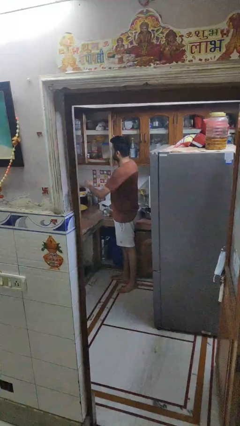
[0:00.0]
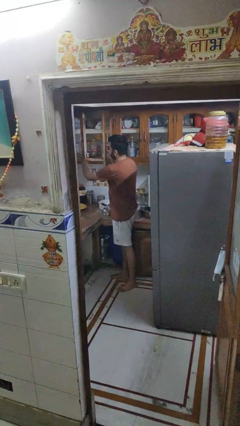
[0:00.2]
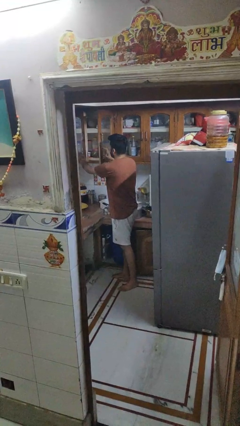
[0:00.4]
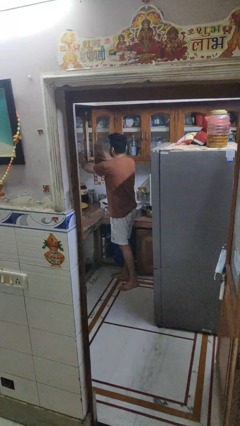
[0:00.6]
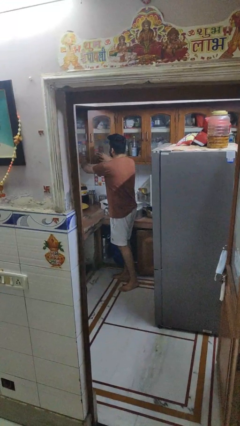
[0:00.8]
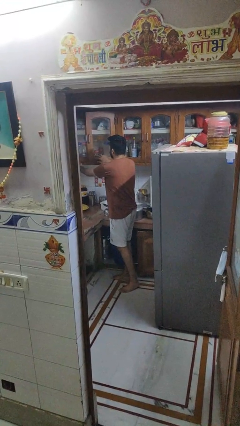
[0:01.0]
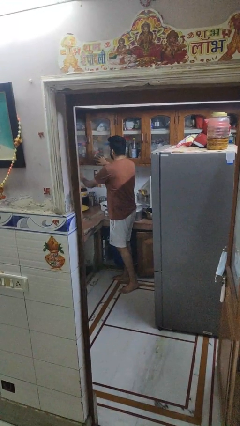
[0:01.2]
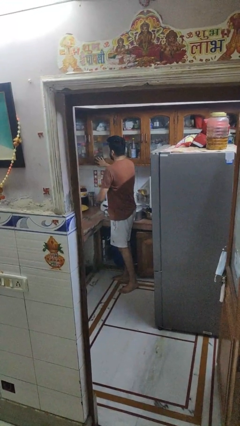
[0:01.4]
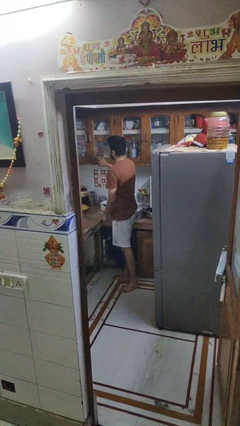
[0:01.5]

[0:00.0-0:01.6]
person closes cabinet

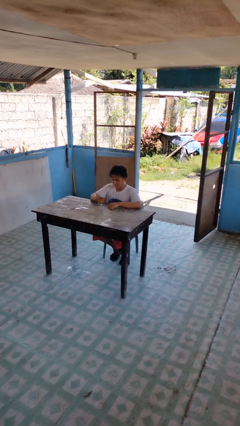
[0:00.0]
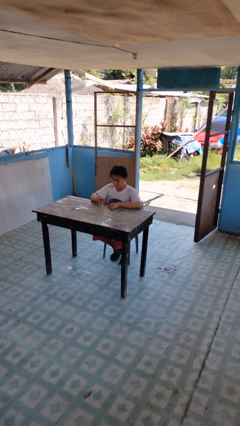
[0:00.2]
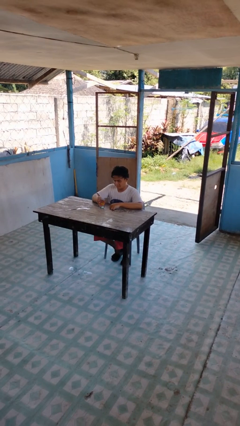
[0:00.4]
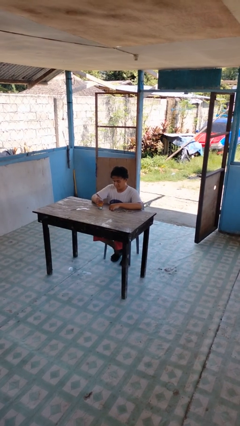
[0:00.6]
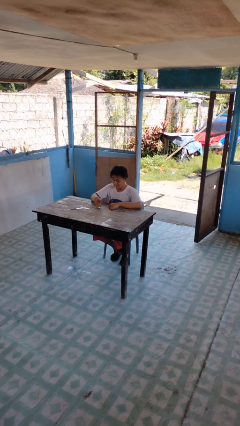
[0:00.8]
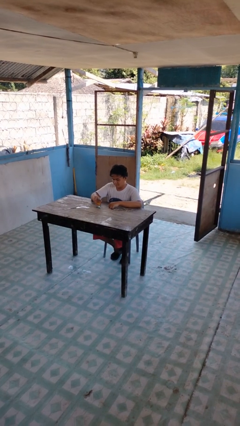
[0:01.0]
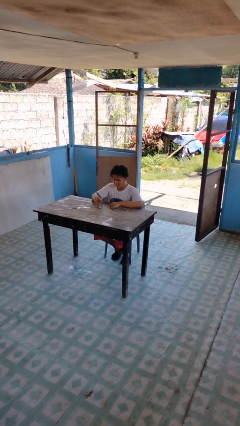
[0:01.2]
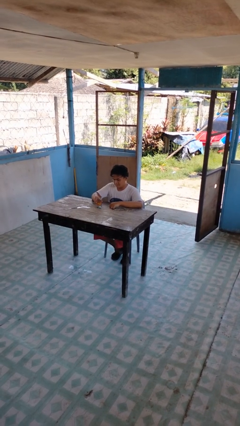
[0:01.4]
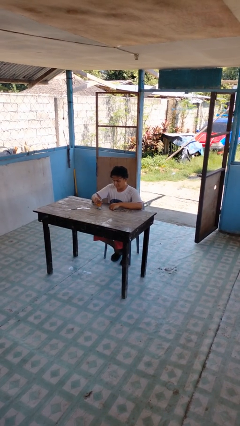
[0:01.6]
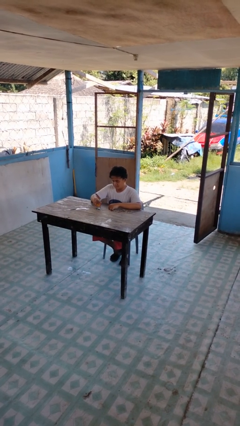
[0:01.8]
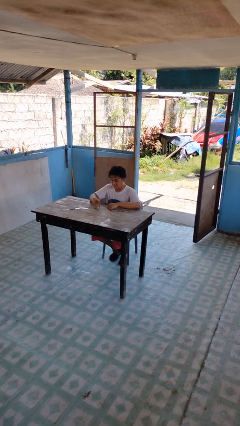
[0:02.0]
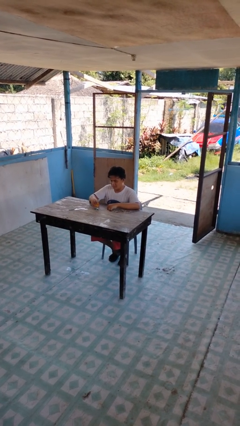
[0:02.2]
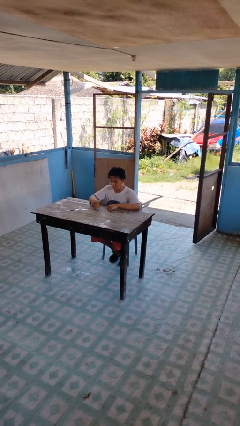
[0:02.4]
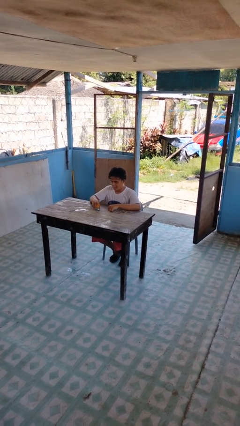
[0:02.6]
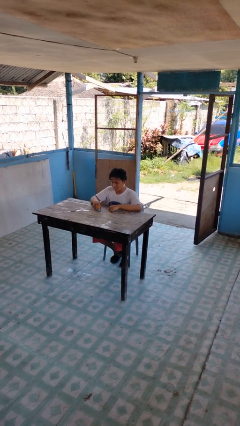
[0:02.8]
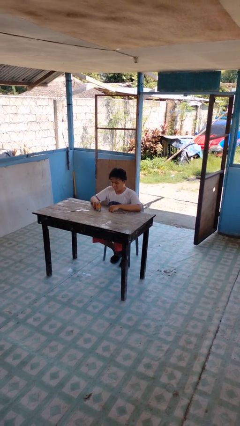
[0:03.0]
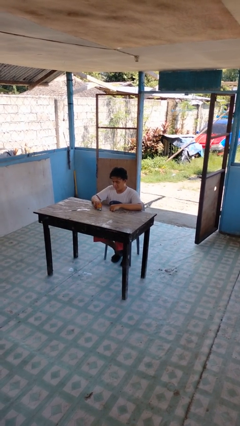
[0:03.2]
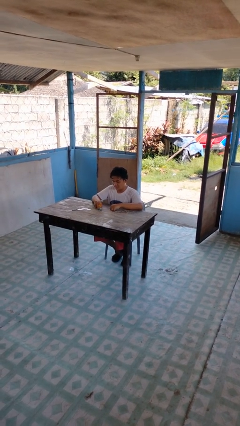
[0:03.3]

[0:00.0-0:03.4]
person sets upright glass

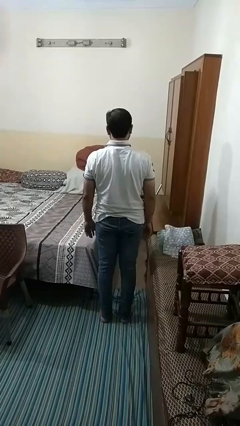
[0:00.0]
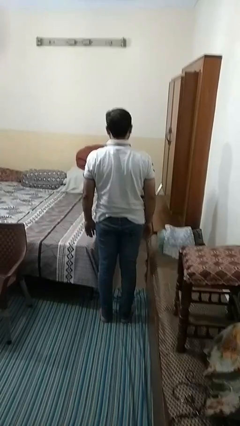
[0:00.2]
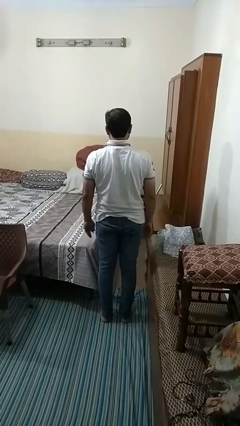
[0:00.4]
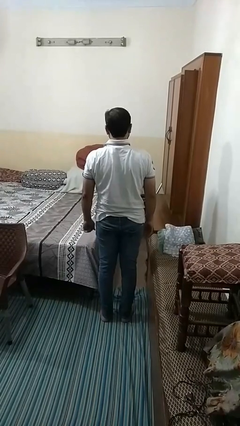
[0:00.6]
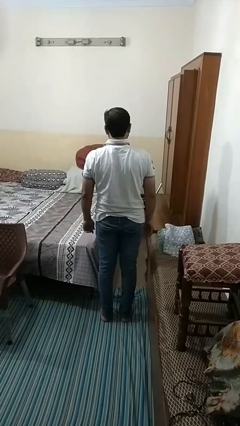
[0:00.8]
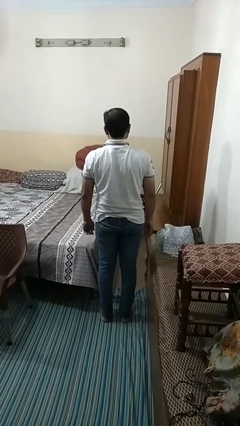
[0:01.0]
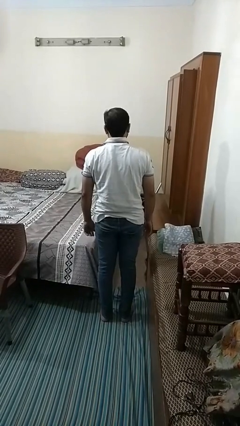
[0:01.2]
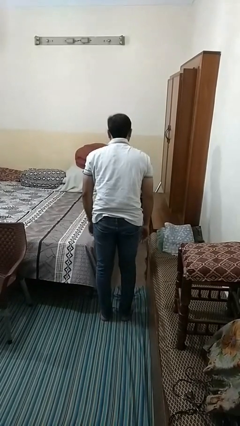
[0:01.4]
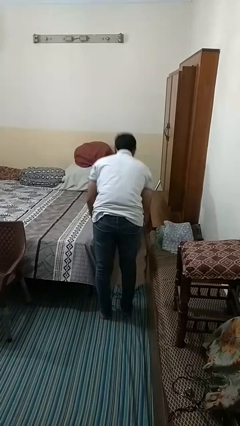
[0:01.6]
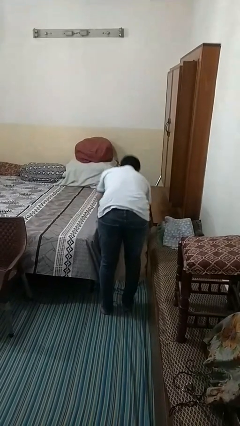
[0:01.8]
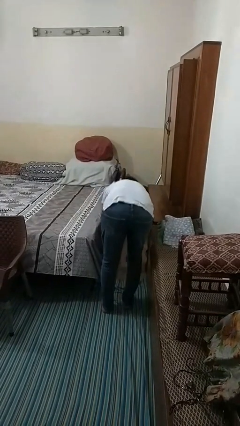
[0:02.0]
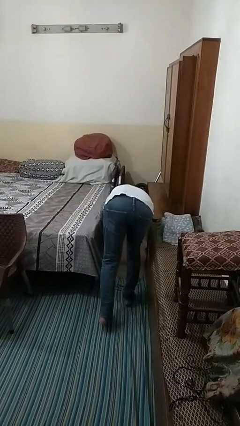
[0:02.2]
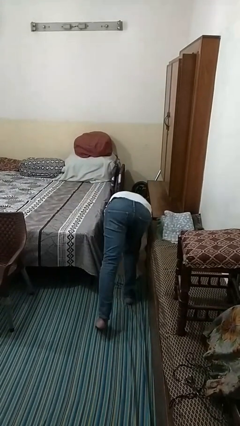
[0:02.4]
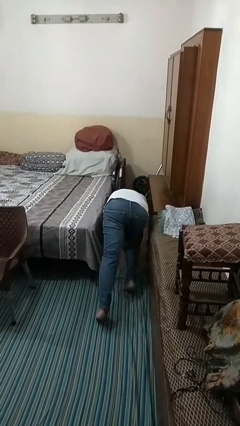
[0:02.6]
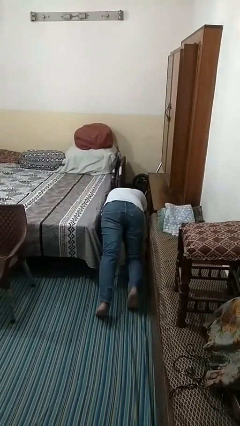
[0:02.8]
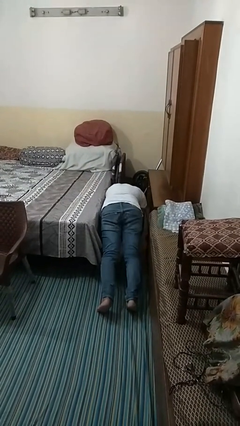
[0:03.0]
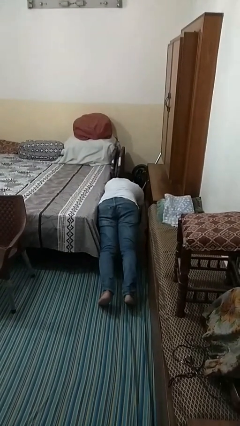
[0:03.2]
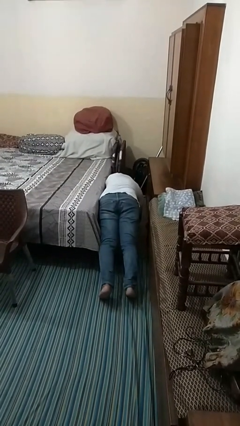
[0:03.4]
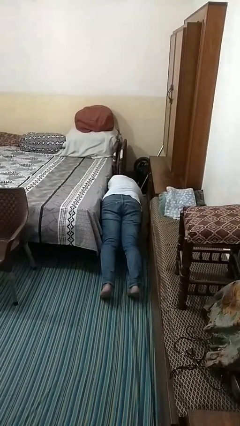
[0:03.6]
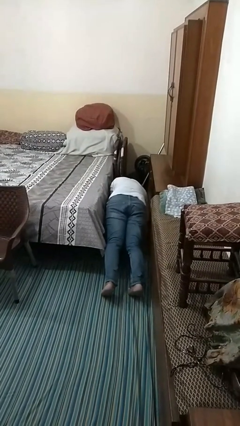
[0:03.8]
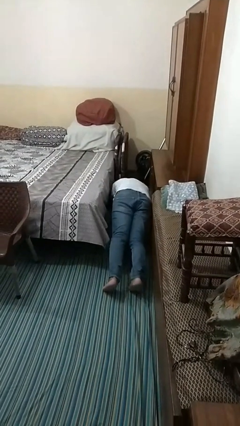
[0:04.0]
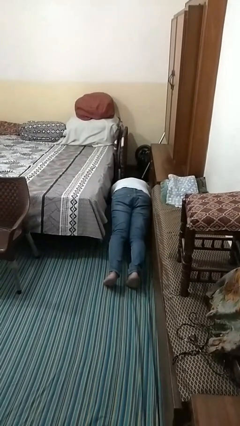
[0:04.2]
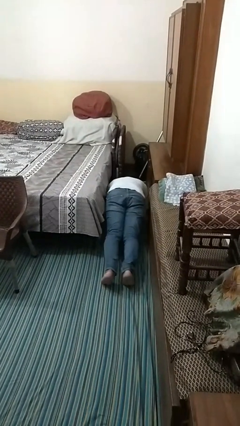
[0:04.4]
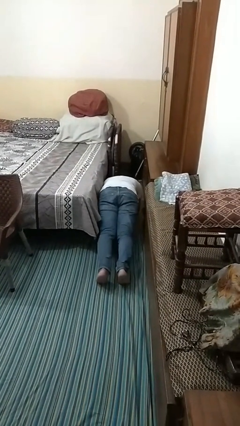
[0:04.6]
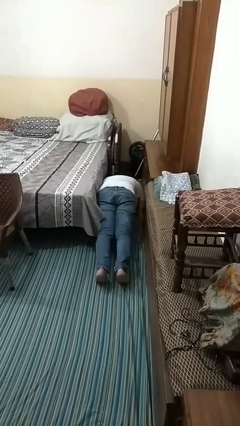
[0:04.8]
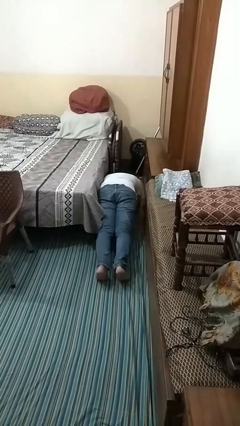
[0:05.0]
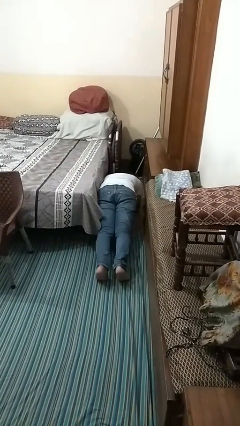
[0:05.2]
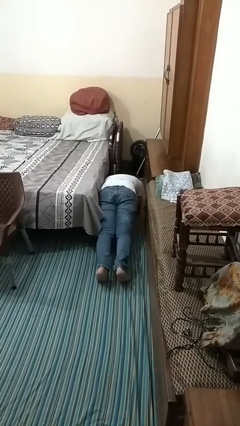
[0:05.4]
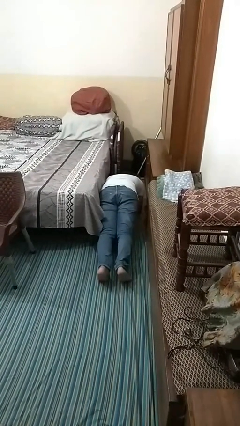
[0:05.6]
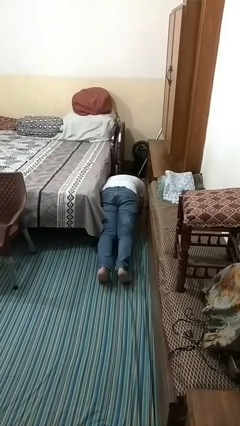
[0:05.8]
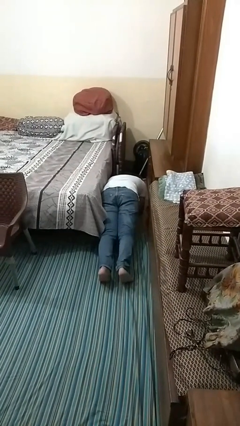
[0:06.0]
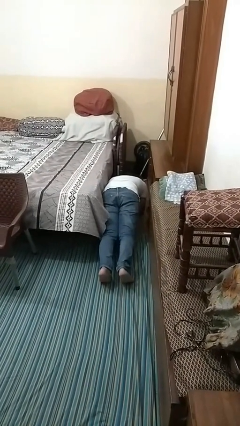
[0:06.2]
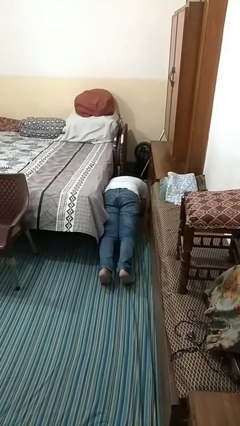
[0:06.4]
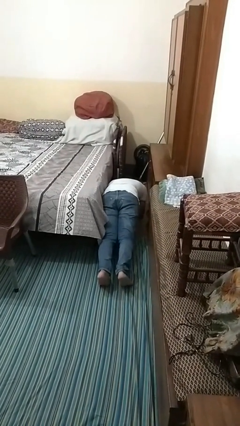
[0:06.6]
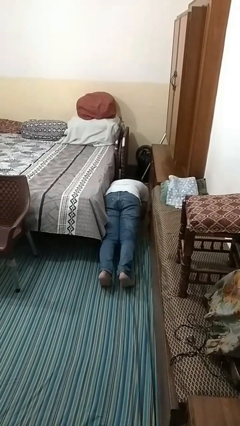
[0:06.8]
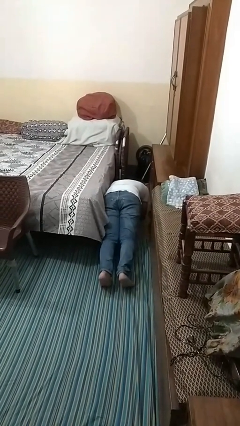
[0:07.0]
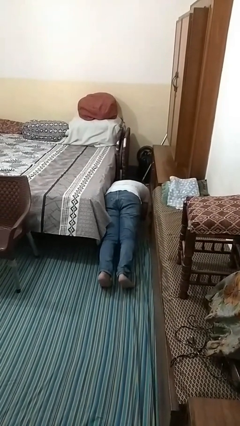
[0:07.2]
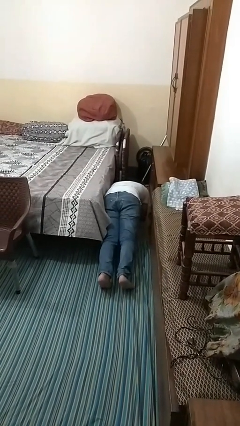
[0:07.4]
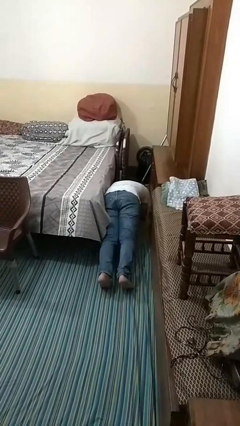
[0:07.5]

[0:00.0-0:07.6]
person exercises with plank

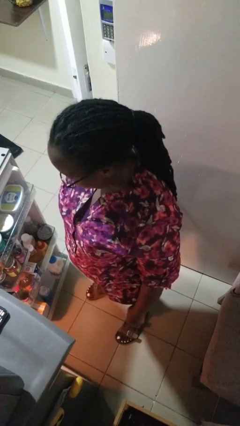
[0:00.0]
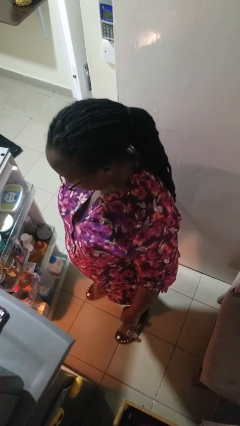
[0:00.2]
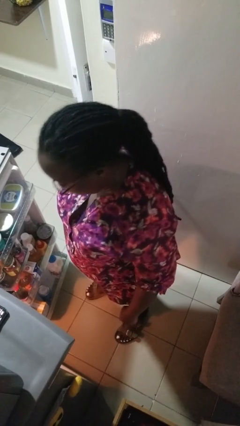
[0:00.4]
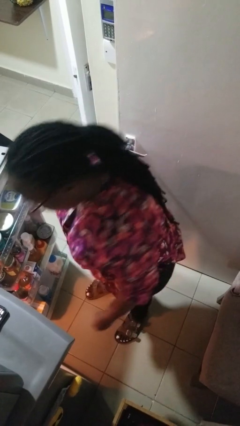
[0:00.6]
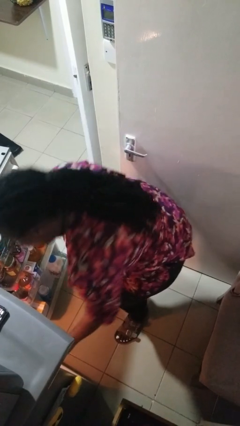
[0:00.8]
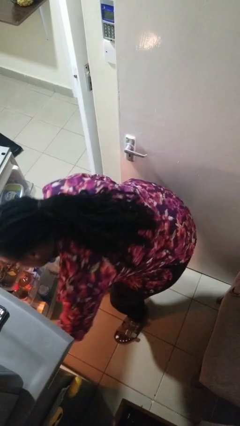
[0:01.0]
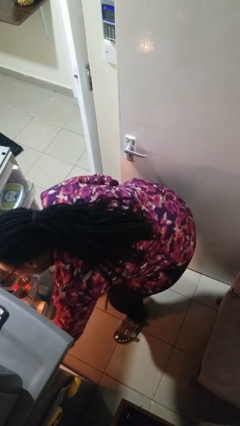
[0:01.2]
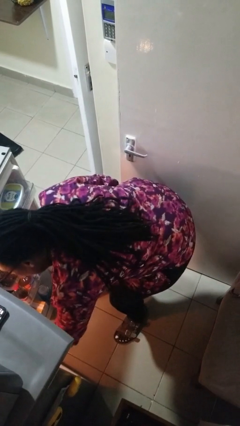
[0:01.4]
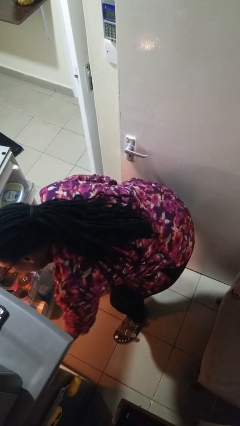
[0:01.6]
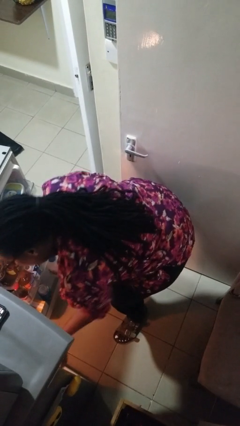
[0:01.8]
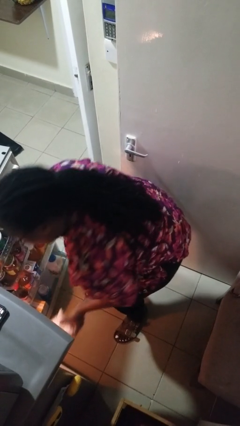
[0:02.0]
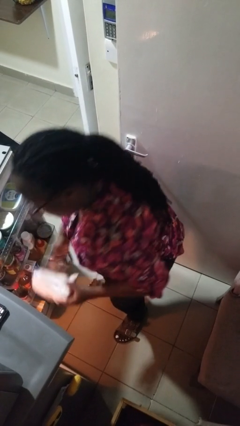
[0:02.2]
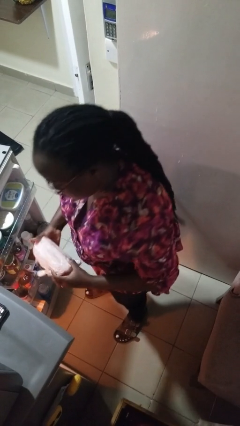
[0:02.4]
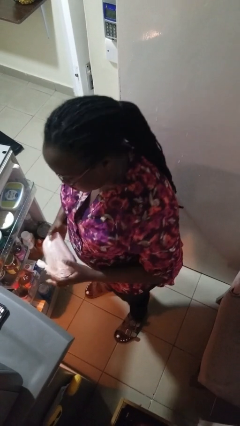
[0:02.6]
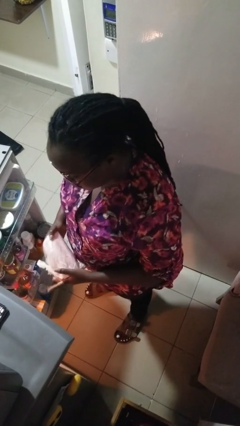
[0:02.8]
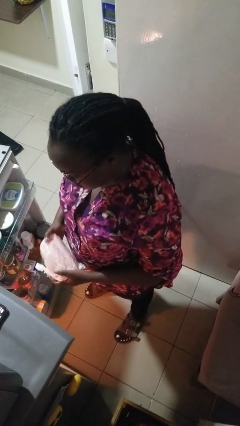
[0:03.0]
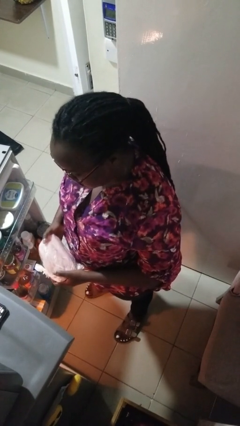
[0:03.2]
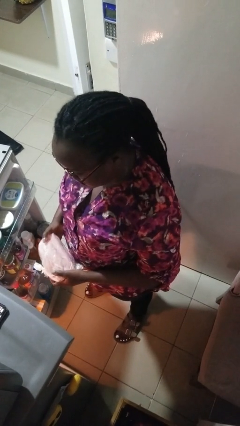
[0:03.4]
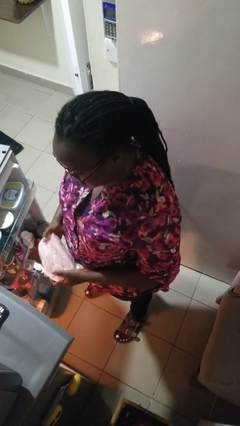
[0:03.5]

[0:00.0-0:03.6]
person takes object from refrigerator

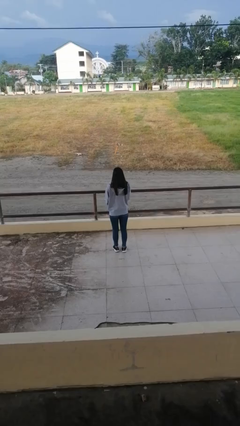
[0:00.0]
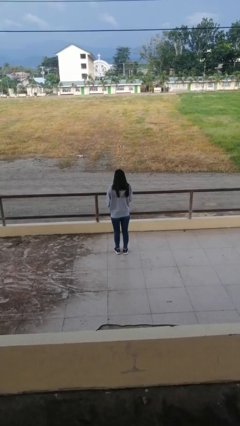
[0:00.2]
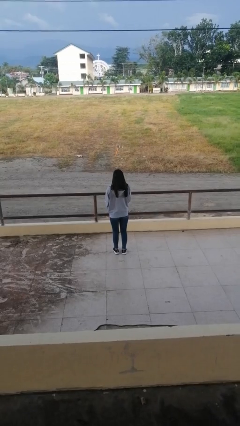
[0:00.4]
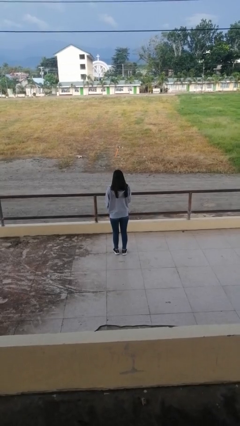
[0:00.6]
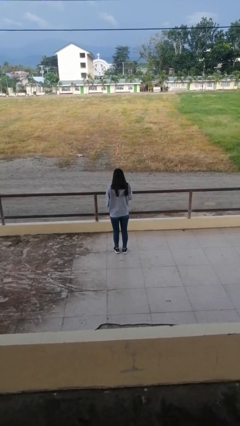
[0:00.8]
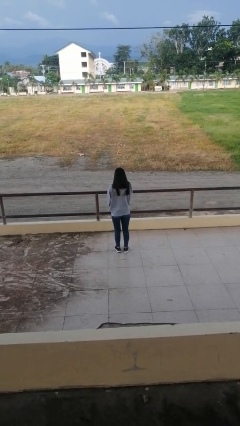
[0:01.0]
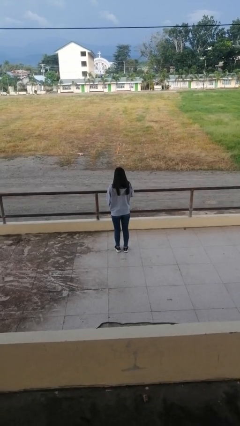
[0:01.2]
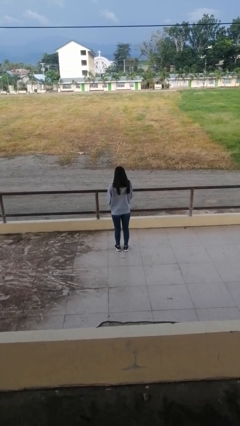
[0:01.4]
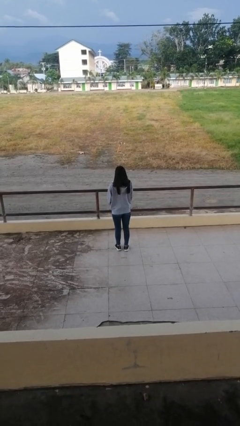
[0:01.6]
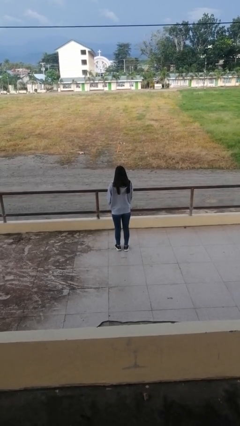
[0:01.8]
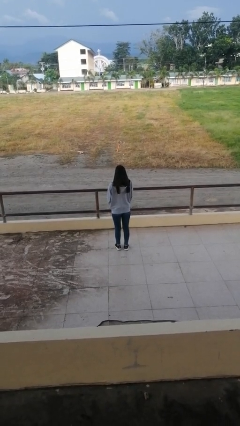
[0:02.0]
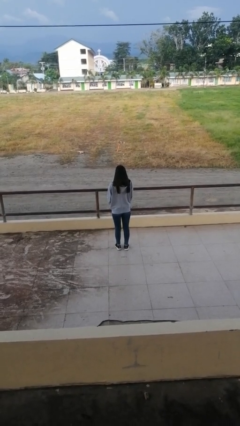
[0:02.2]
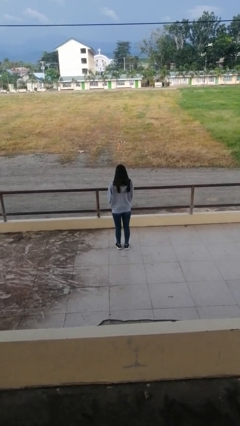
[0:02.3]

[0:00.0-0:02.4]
person unzips jacket
